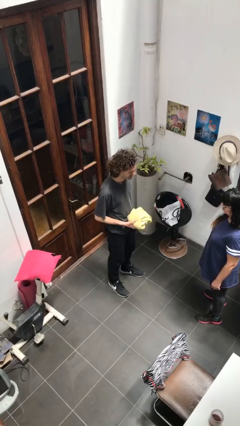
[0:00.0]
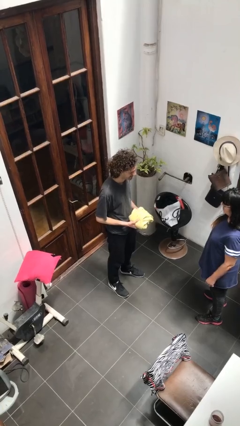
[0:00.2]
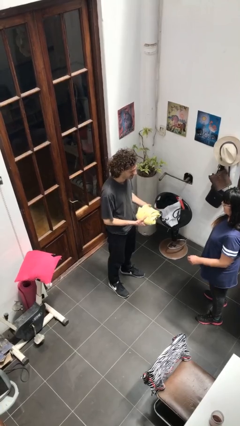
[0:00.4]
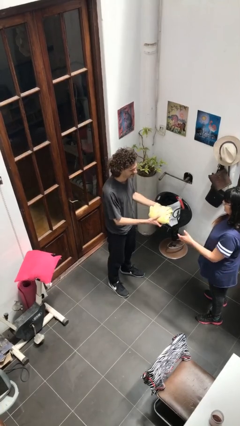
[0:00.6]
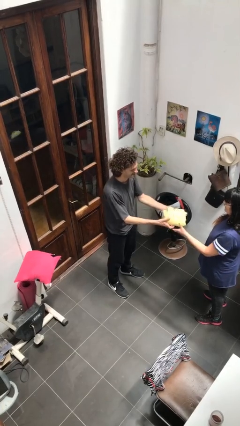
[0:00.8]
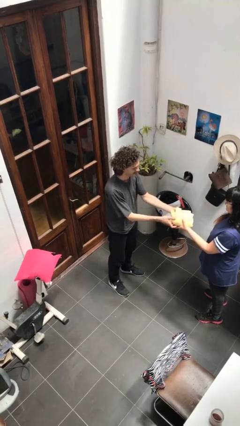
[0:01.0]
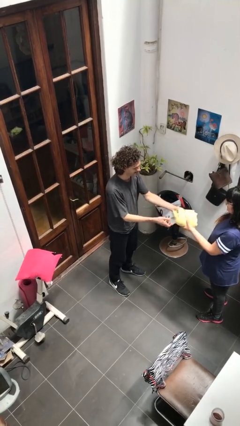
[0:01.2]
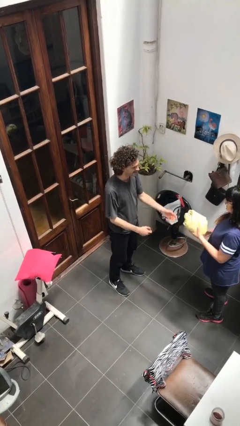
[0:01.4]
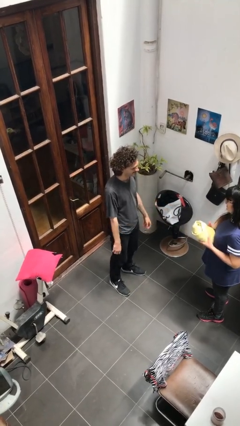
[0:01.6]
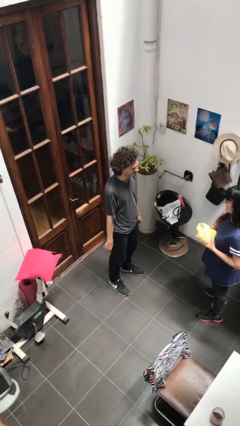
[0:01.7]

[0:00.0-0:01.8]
person transfers object to person

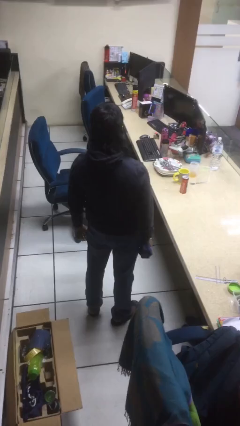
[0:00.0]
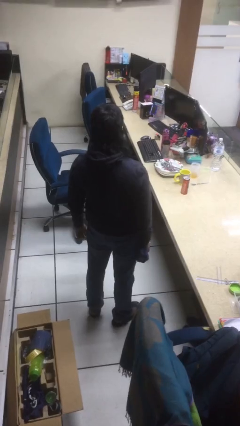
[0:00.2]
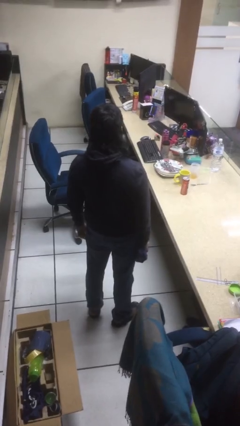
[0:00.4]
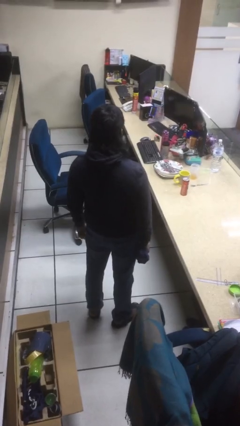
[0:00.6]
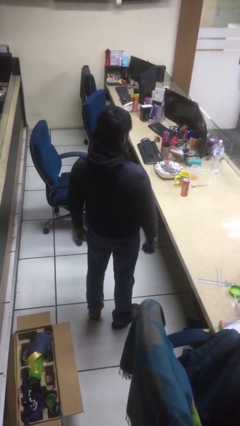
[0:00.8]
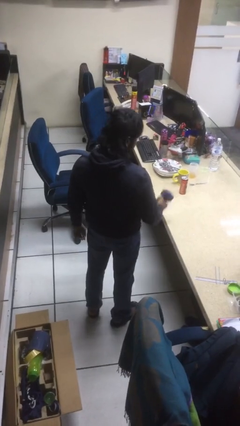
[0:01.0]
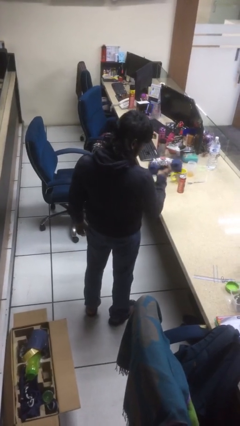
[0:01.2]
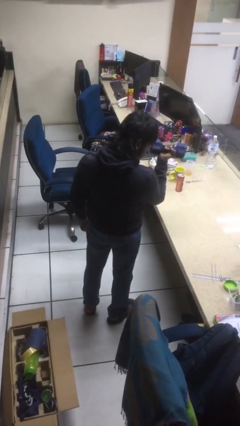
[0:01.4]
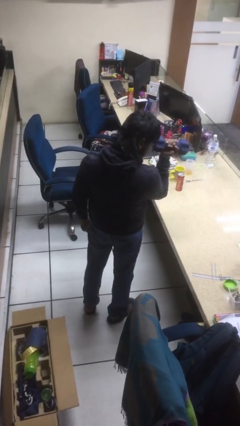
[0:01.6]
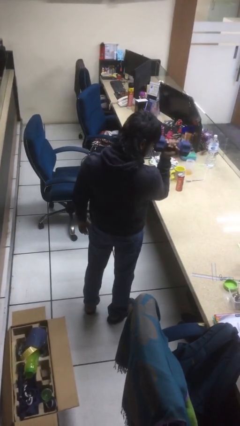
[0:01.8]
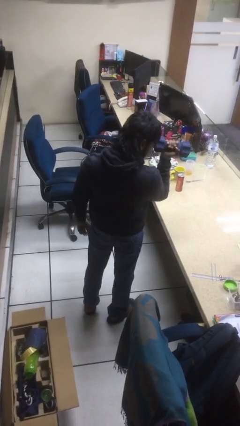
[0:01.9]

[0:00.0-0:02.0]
person lifts dumbbells

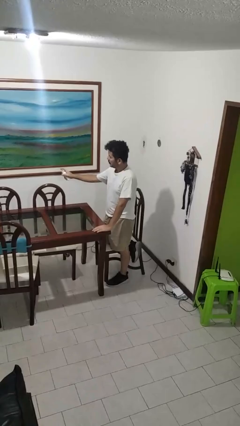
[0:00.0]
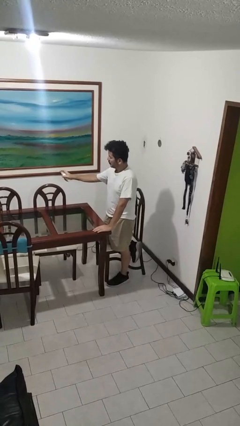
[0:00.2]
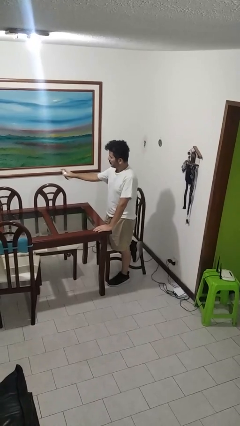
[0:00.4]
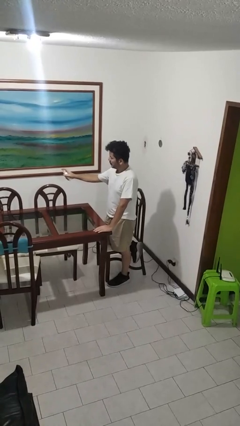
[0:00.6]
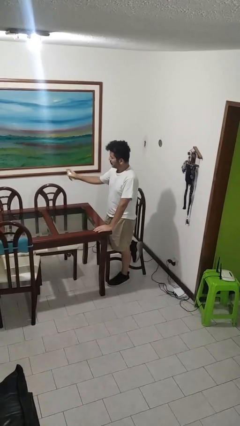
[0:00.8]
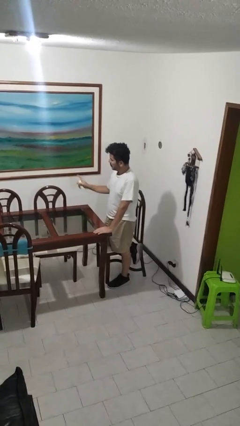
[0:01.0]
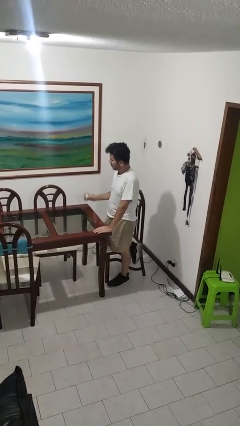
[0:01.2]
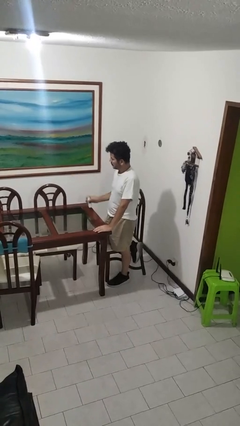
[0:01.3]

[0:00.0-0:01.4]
person sprays from bottle

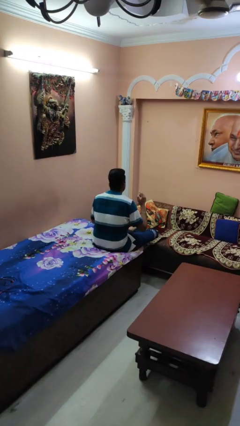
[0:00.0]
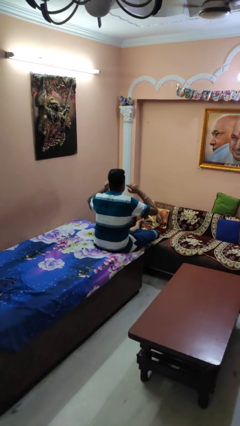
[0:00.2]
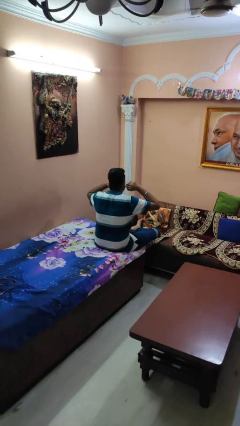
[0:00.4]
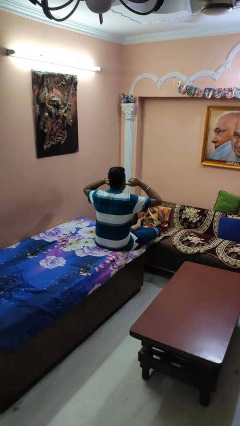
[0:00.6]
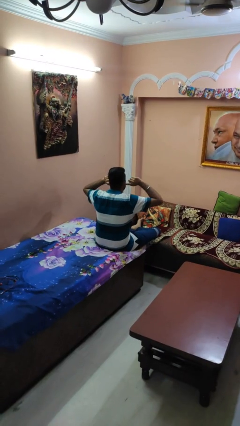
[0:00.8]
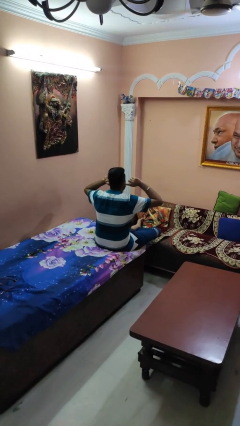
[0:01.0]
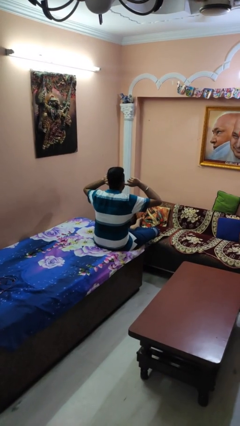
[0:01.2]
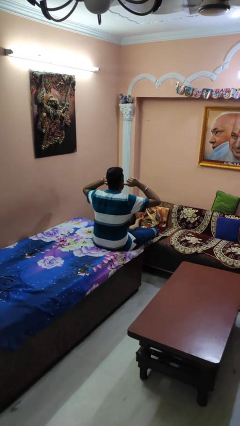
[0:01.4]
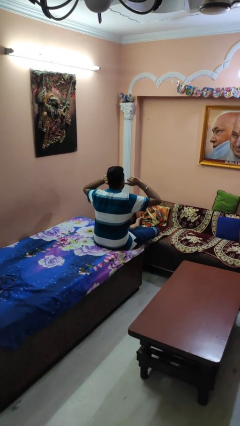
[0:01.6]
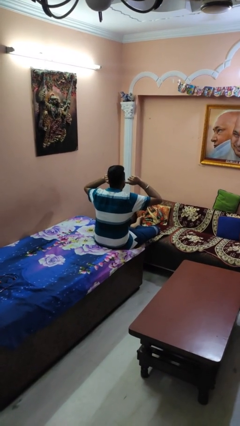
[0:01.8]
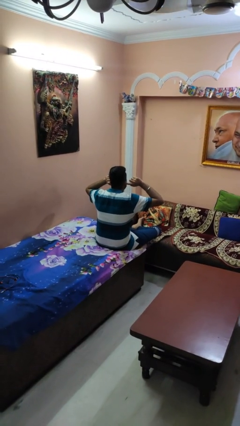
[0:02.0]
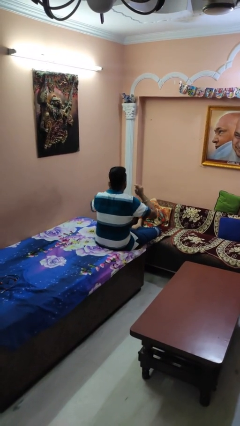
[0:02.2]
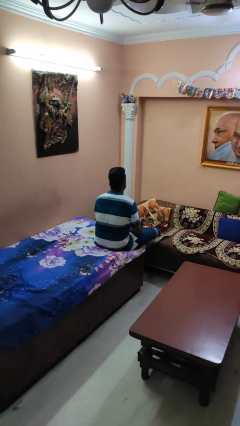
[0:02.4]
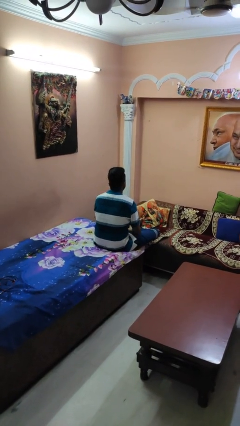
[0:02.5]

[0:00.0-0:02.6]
person puts fingers in ear

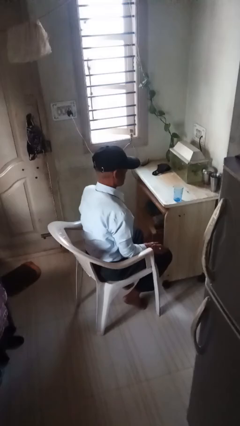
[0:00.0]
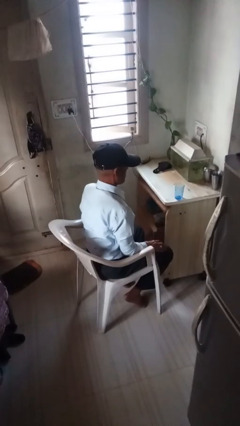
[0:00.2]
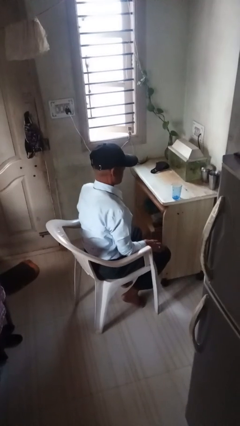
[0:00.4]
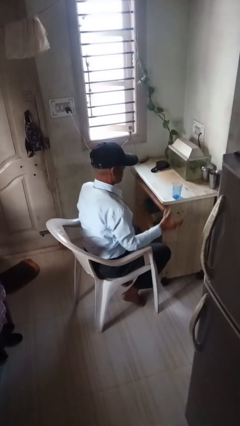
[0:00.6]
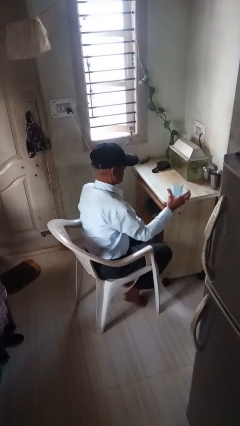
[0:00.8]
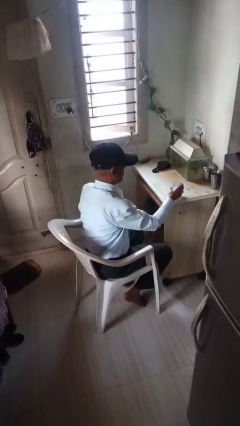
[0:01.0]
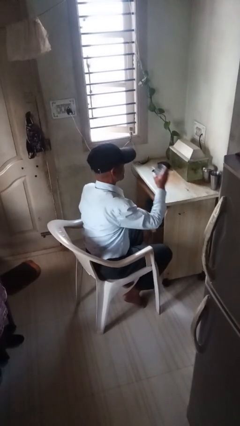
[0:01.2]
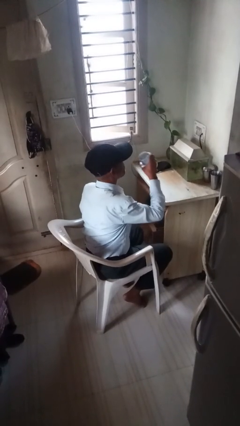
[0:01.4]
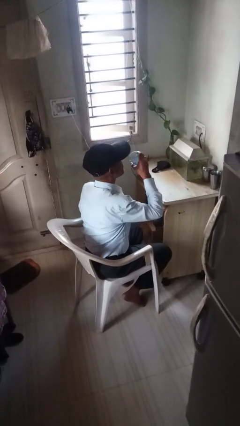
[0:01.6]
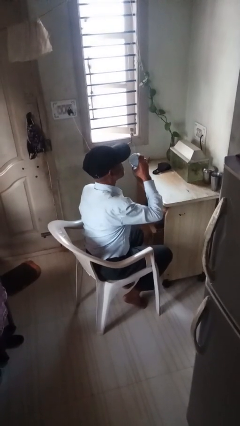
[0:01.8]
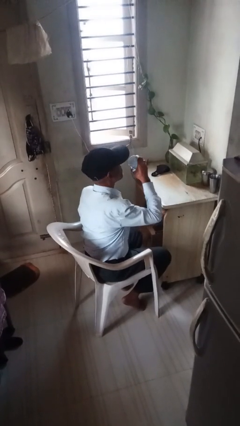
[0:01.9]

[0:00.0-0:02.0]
person picks up object from table

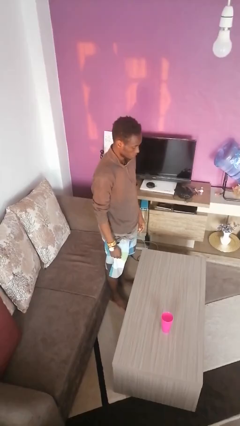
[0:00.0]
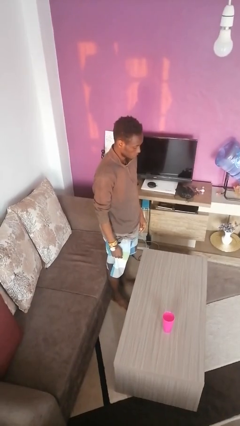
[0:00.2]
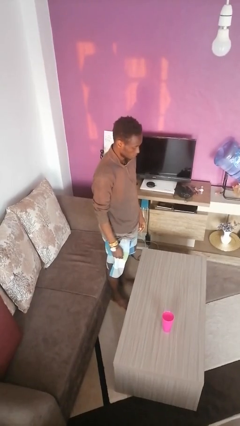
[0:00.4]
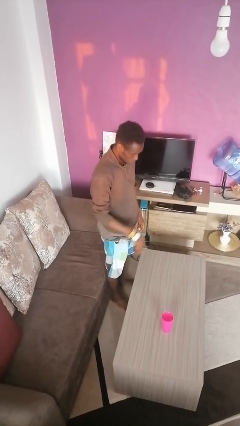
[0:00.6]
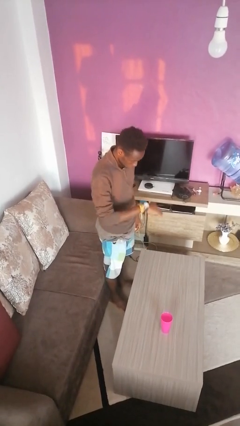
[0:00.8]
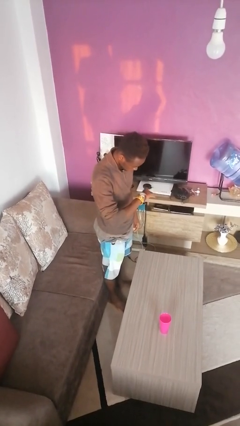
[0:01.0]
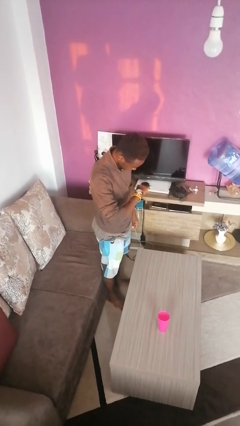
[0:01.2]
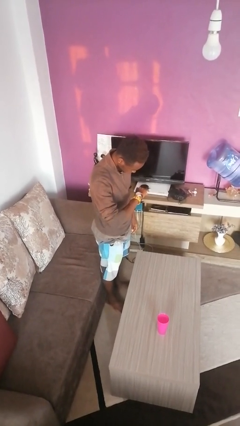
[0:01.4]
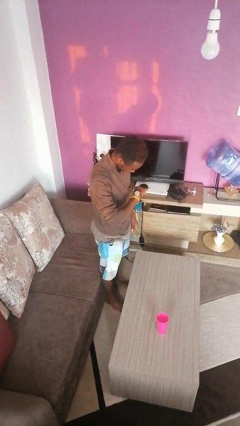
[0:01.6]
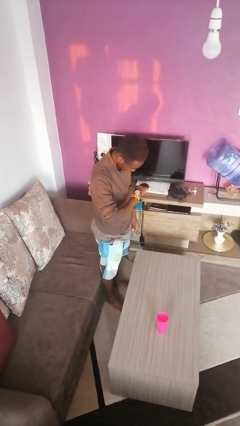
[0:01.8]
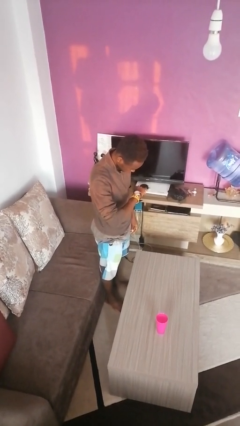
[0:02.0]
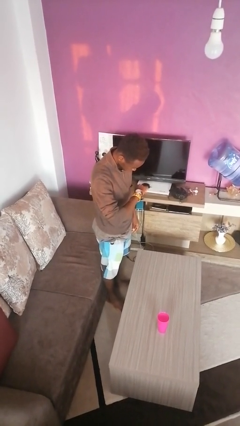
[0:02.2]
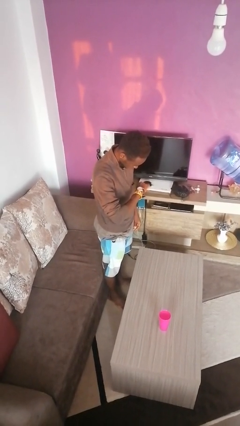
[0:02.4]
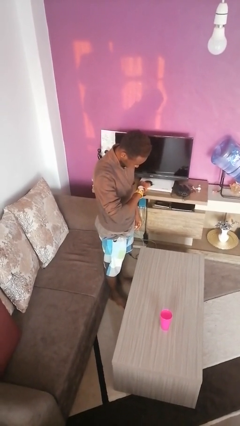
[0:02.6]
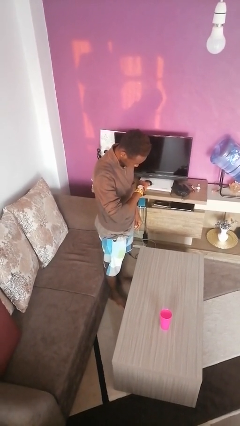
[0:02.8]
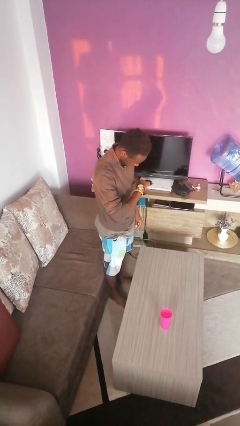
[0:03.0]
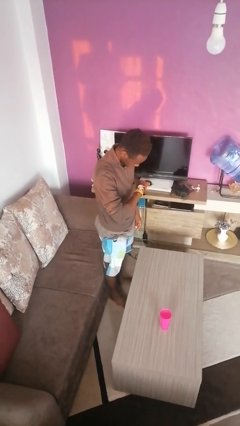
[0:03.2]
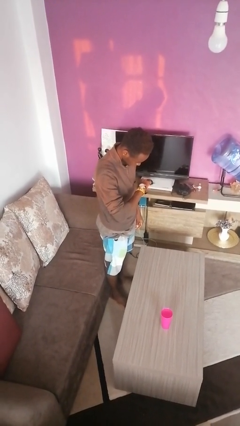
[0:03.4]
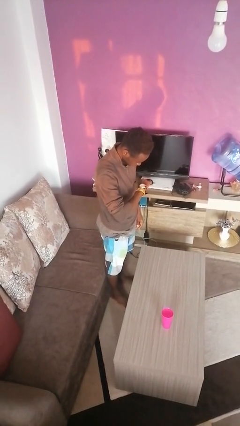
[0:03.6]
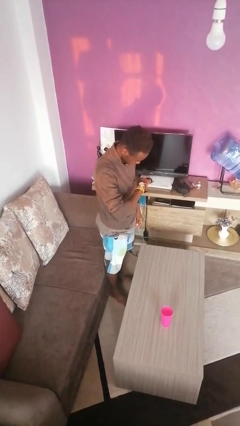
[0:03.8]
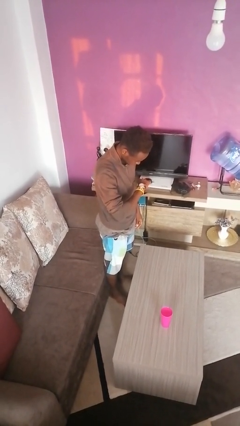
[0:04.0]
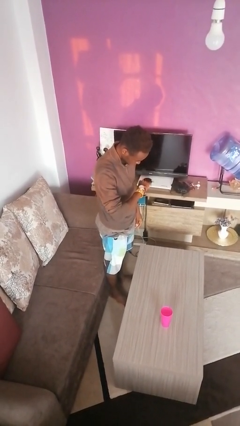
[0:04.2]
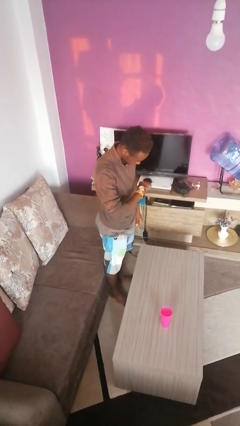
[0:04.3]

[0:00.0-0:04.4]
person looks at wristwatch

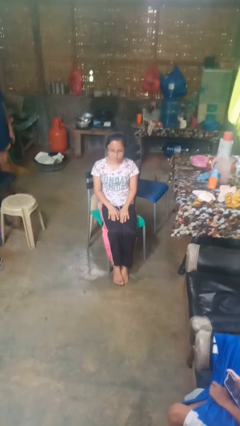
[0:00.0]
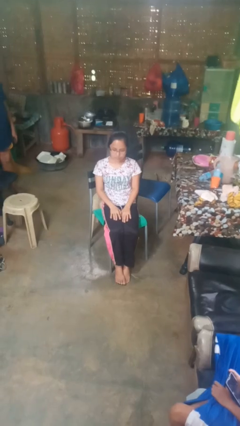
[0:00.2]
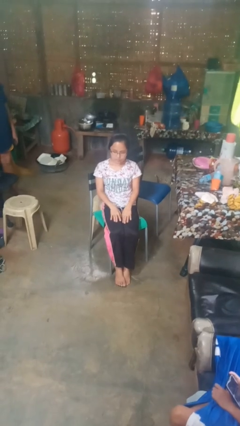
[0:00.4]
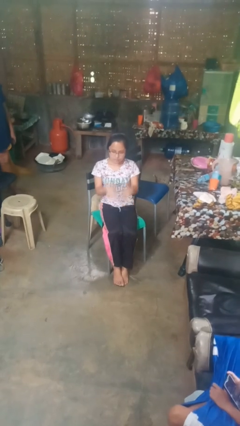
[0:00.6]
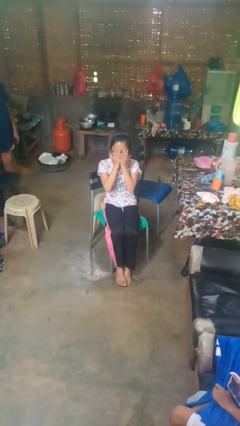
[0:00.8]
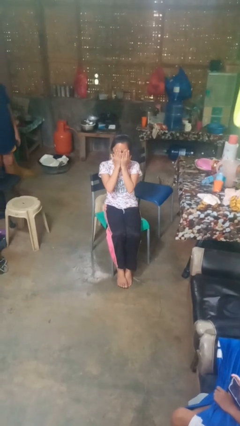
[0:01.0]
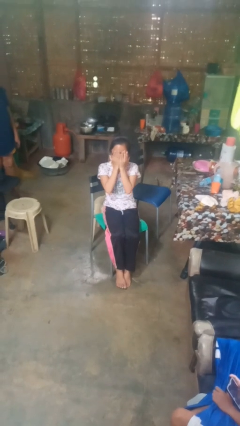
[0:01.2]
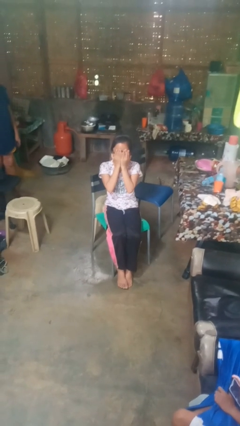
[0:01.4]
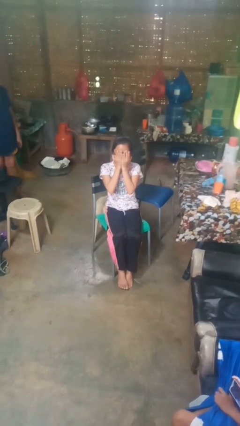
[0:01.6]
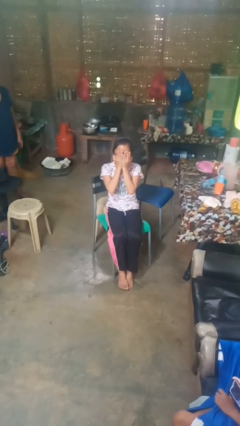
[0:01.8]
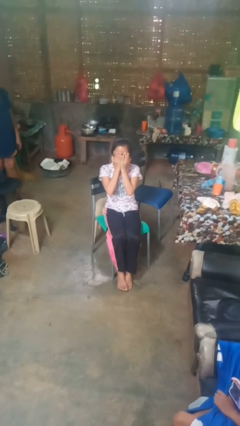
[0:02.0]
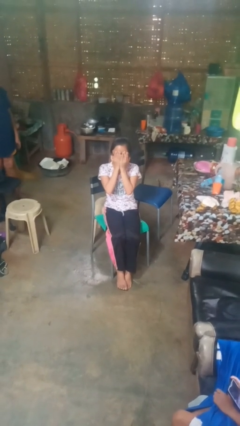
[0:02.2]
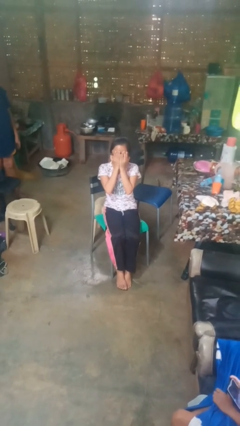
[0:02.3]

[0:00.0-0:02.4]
person covers face with hands

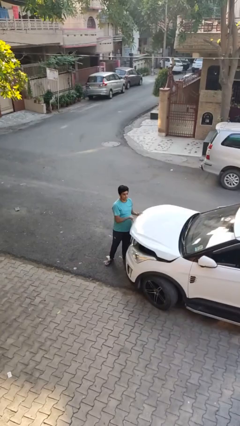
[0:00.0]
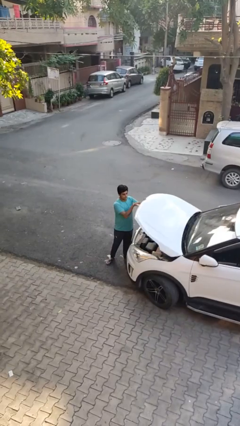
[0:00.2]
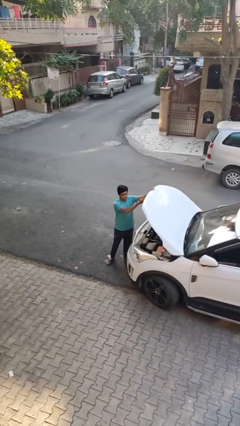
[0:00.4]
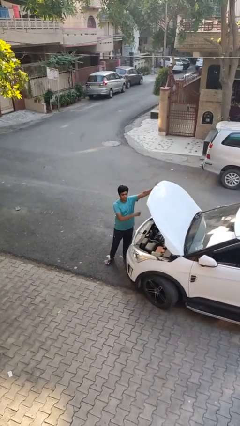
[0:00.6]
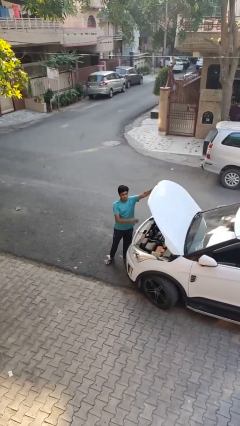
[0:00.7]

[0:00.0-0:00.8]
person opens car hood
